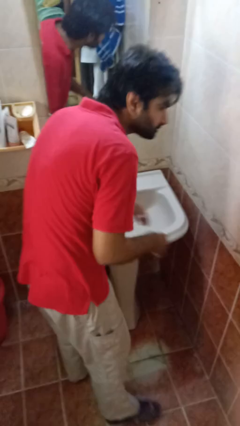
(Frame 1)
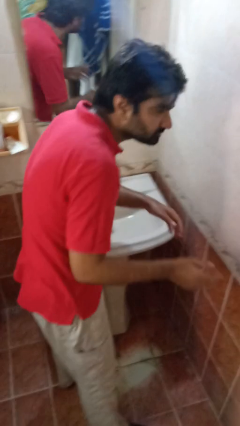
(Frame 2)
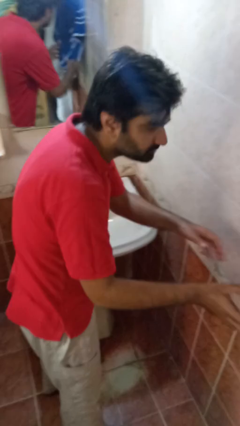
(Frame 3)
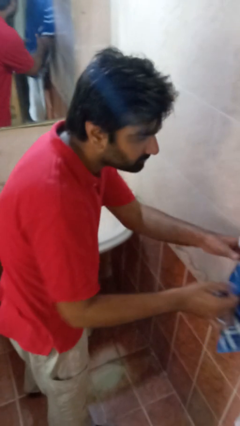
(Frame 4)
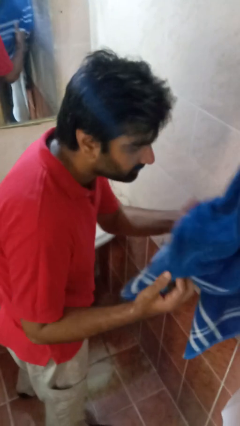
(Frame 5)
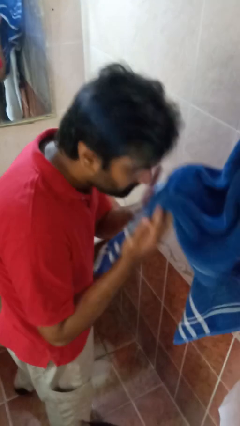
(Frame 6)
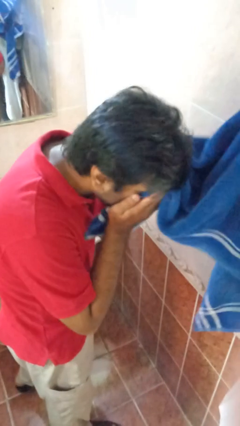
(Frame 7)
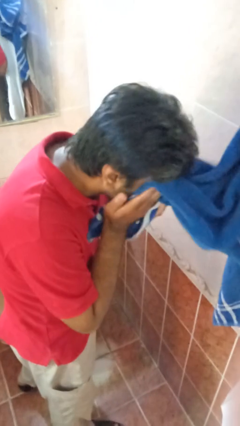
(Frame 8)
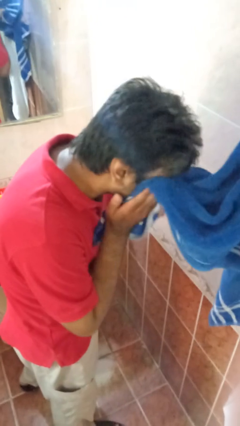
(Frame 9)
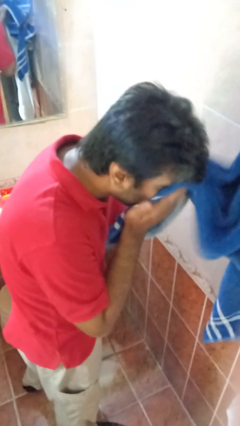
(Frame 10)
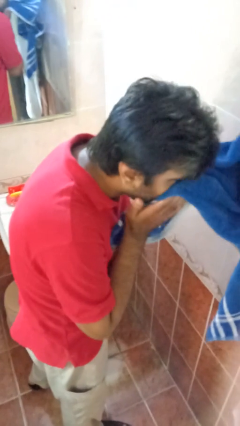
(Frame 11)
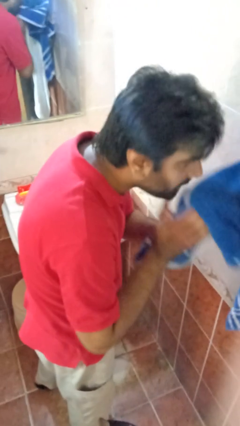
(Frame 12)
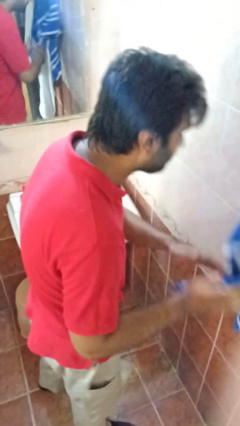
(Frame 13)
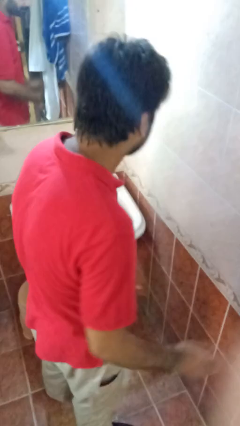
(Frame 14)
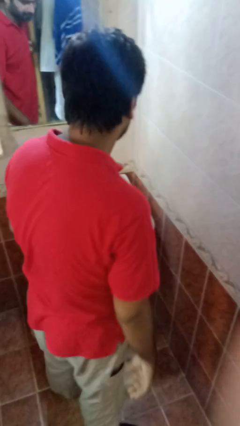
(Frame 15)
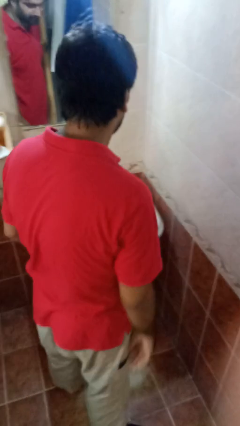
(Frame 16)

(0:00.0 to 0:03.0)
person dries face with towel

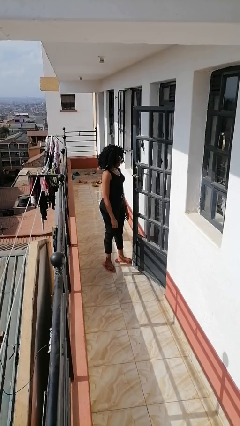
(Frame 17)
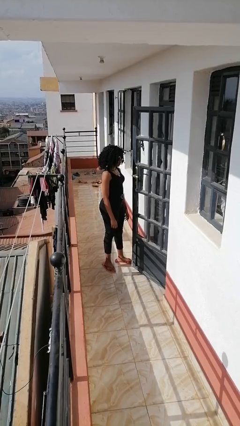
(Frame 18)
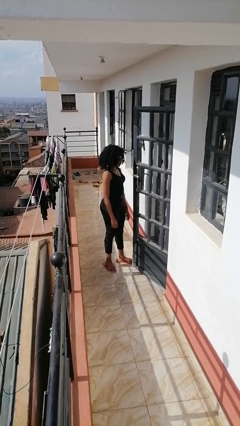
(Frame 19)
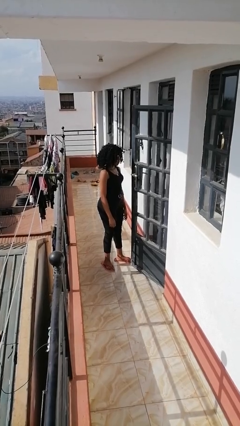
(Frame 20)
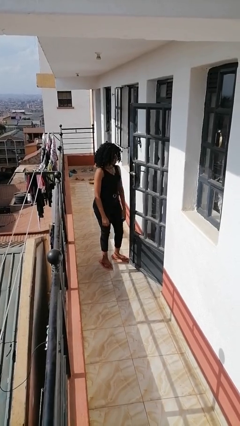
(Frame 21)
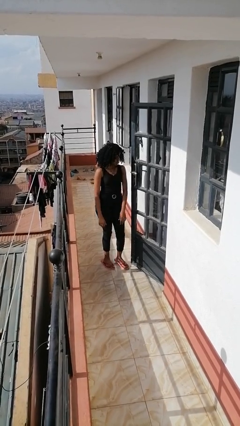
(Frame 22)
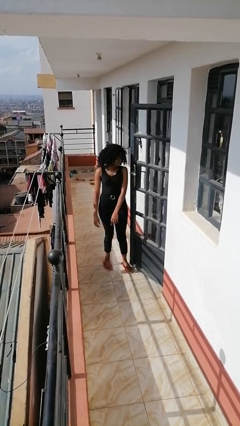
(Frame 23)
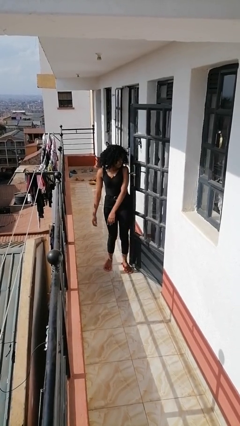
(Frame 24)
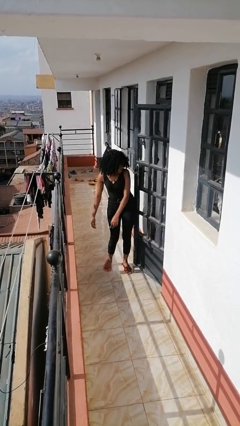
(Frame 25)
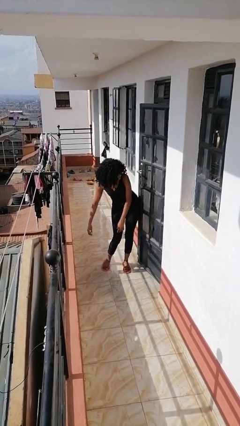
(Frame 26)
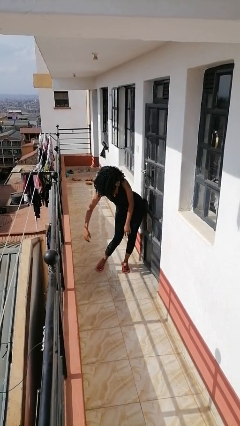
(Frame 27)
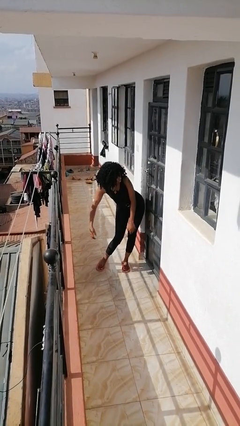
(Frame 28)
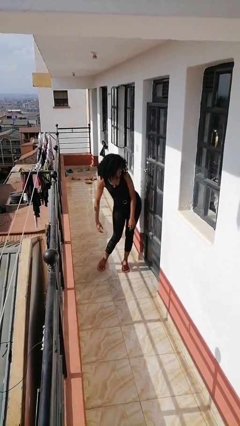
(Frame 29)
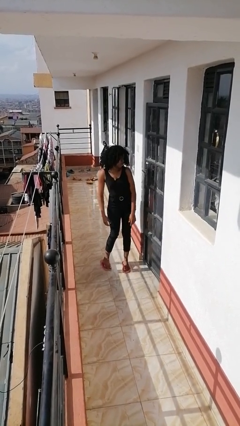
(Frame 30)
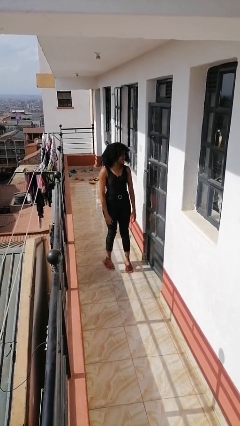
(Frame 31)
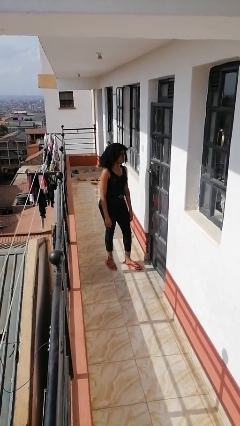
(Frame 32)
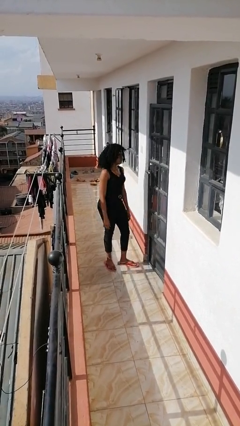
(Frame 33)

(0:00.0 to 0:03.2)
person closes door with hip

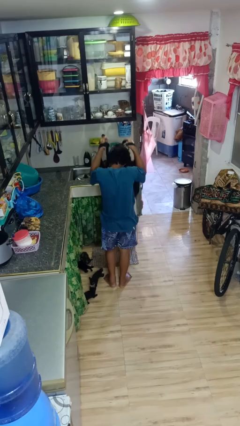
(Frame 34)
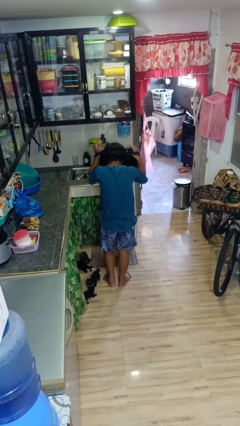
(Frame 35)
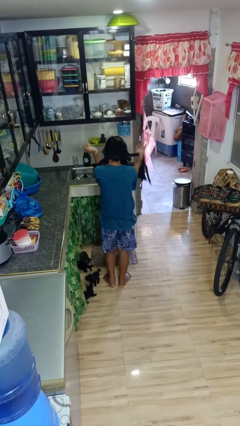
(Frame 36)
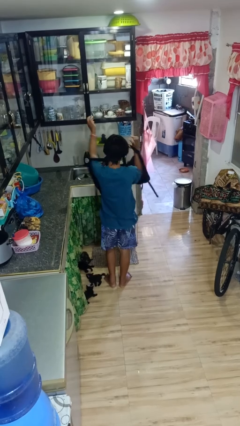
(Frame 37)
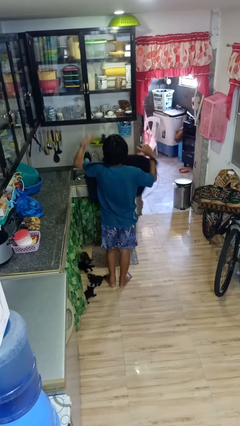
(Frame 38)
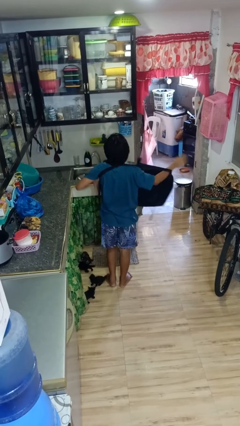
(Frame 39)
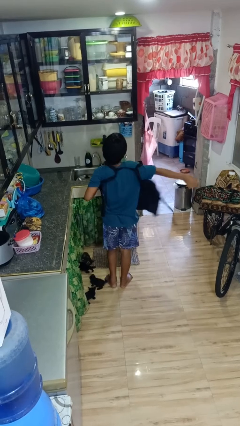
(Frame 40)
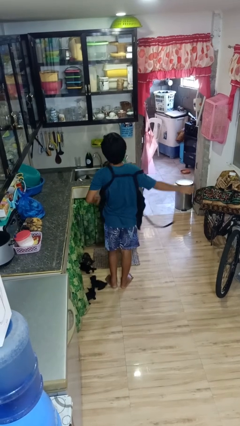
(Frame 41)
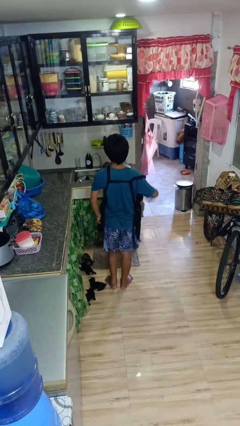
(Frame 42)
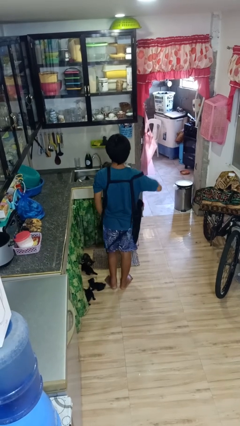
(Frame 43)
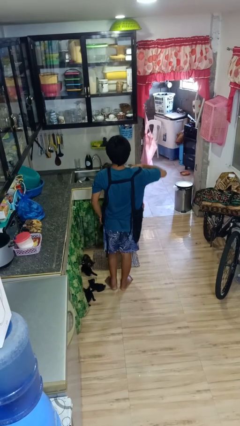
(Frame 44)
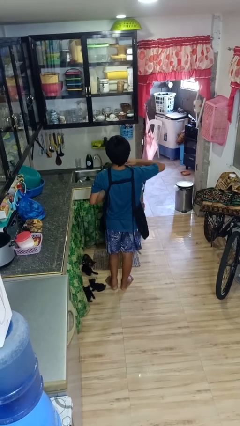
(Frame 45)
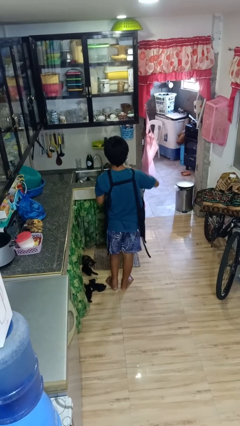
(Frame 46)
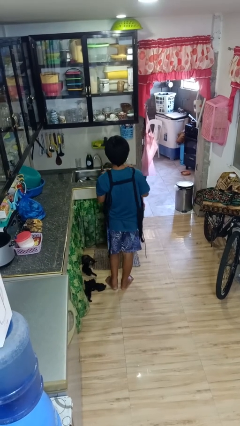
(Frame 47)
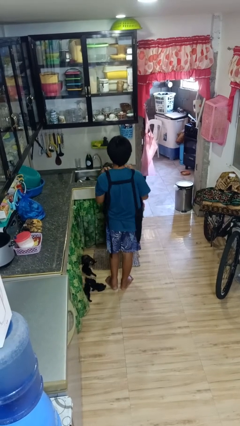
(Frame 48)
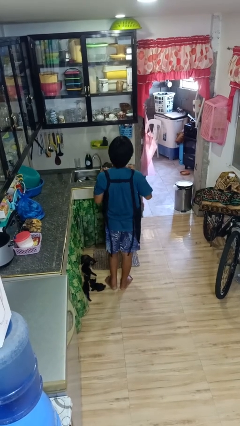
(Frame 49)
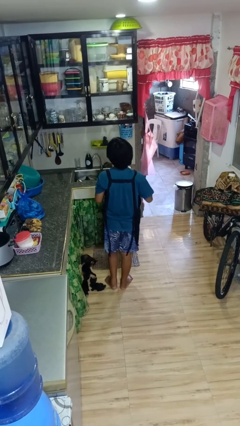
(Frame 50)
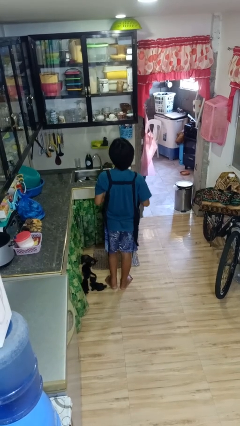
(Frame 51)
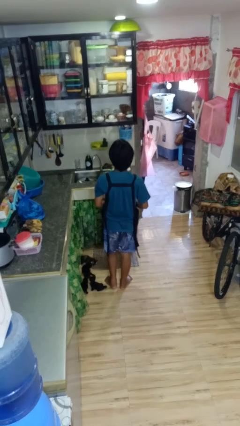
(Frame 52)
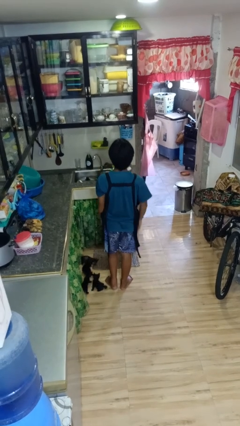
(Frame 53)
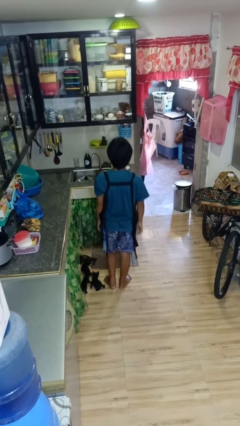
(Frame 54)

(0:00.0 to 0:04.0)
person puts on apron

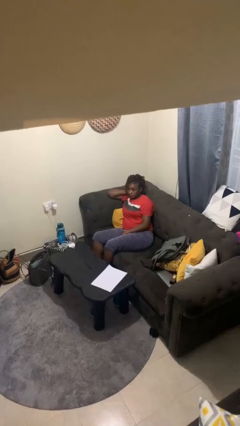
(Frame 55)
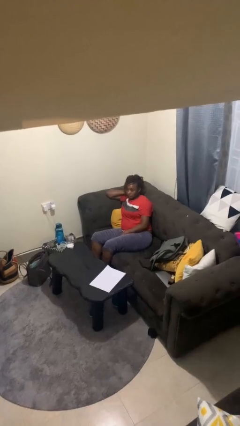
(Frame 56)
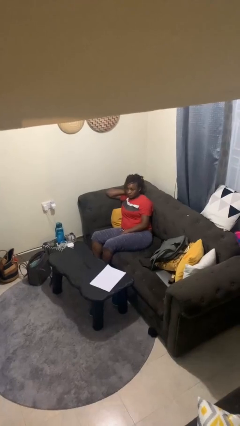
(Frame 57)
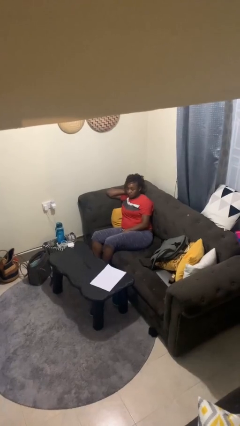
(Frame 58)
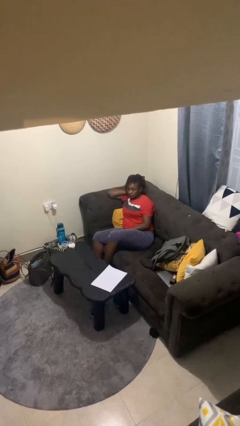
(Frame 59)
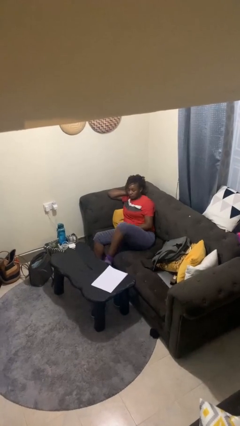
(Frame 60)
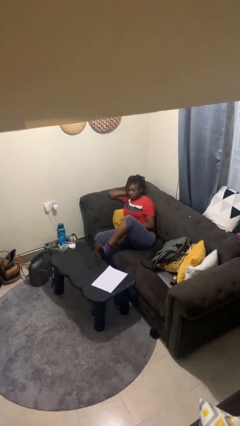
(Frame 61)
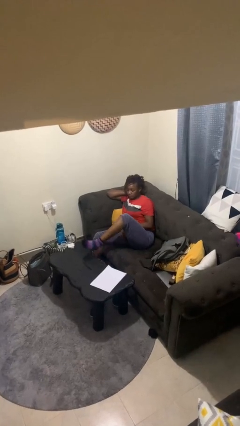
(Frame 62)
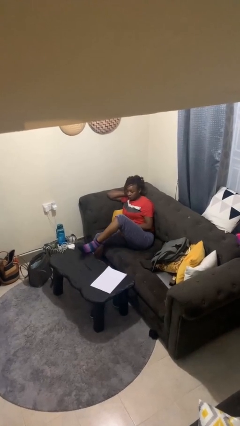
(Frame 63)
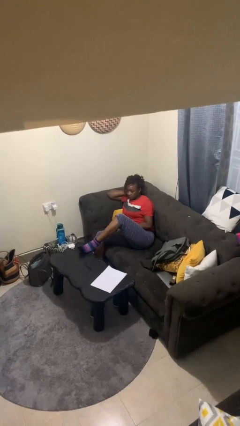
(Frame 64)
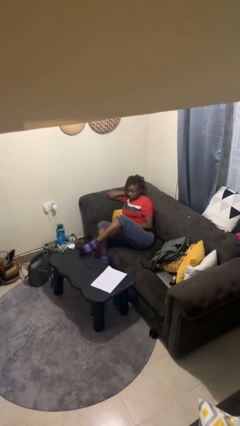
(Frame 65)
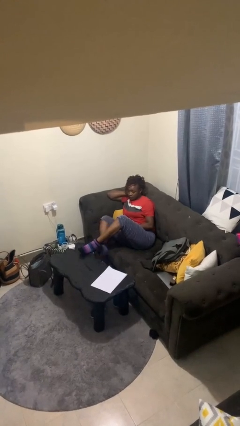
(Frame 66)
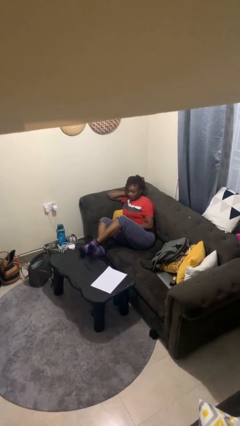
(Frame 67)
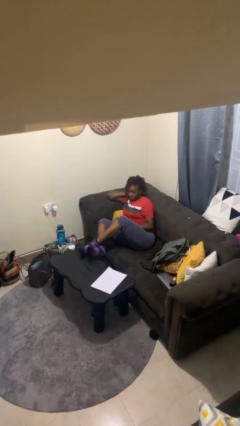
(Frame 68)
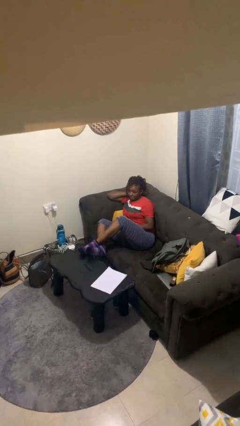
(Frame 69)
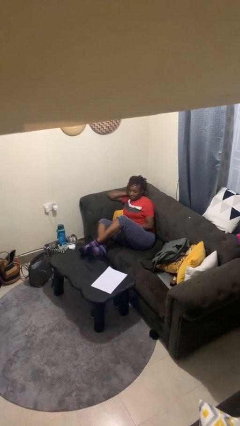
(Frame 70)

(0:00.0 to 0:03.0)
person puts feet up

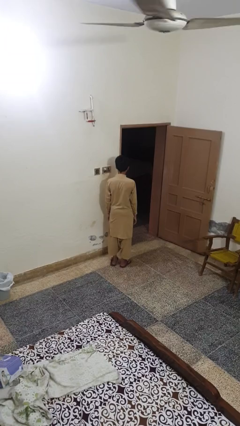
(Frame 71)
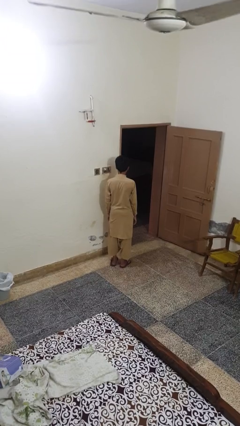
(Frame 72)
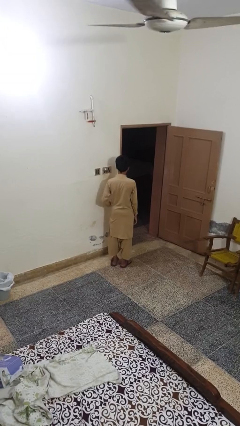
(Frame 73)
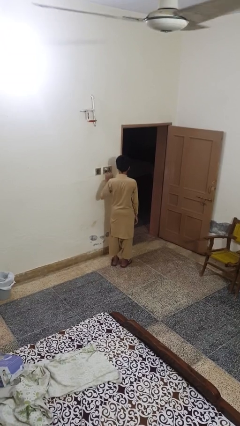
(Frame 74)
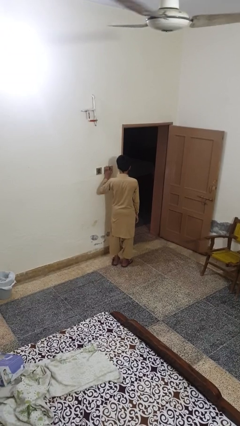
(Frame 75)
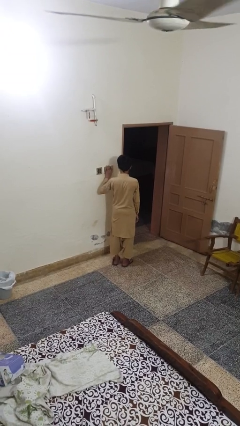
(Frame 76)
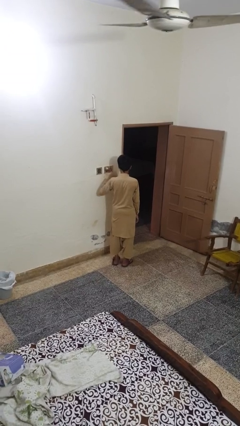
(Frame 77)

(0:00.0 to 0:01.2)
person turns off fan

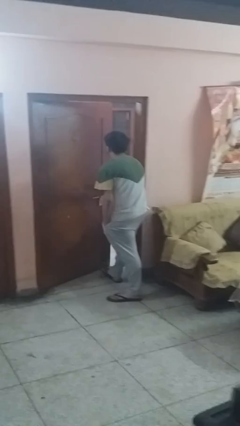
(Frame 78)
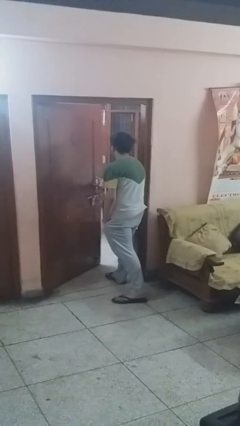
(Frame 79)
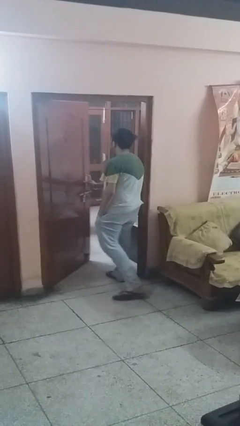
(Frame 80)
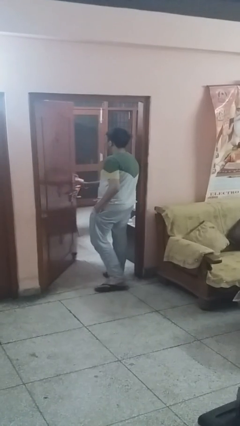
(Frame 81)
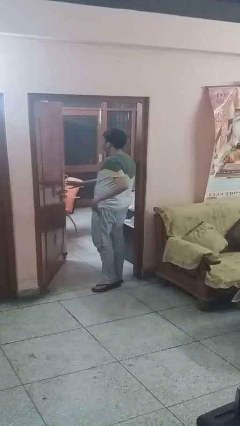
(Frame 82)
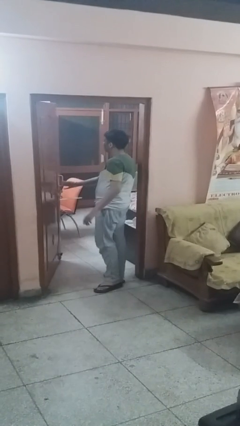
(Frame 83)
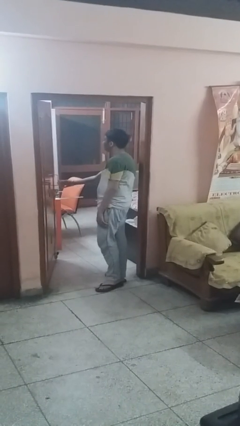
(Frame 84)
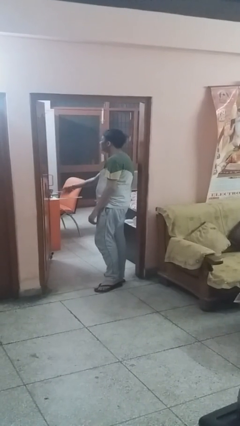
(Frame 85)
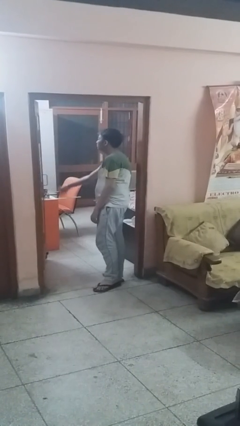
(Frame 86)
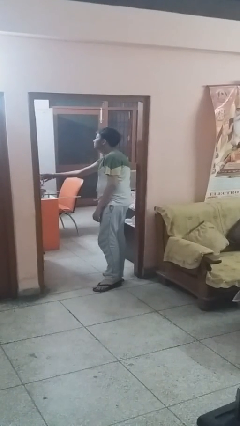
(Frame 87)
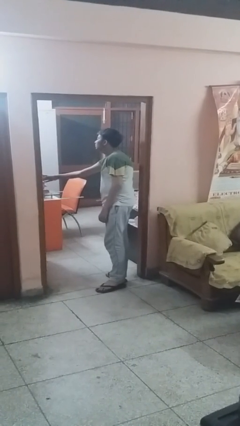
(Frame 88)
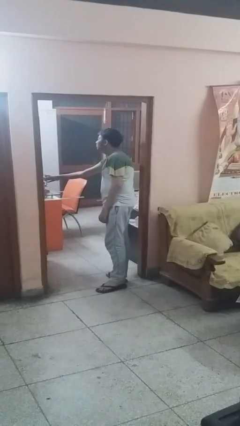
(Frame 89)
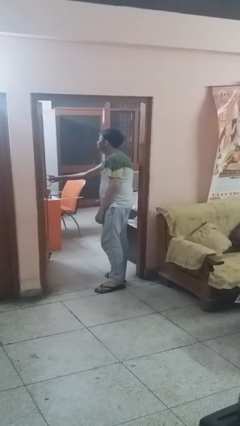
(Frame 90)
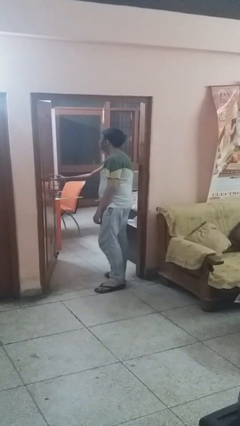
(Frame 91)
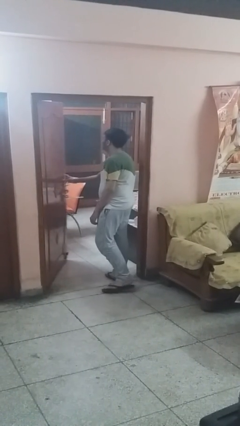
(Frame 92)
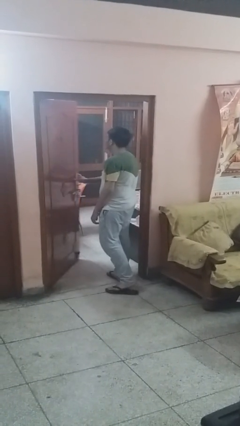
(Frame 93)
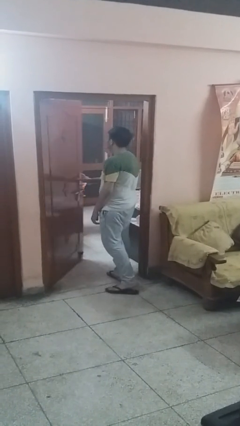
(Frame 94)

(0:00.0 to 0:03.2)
person opens facility door
